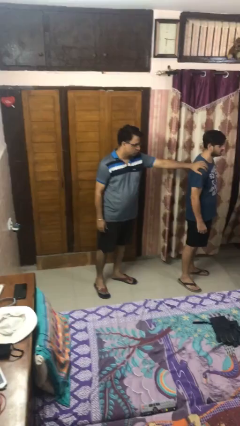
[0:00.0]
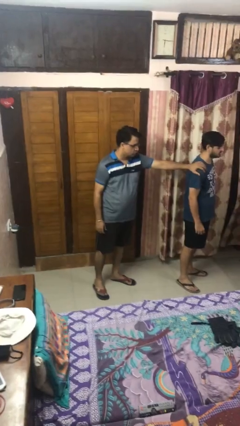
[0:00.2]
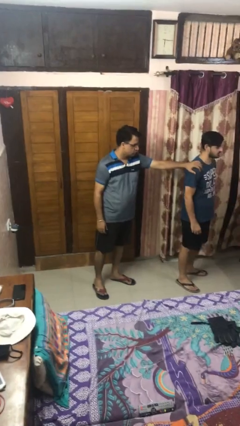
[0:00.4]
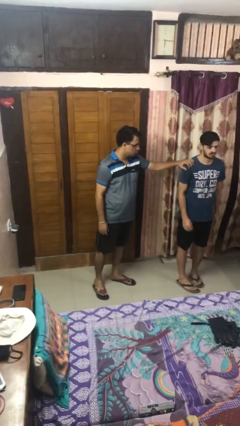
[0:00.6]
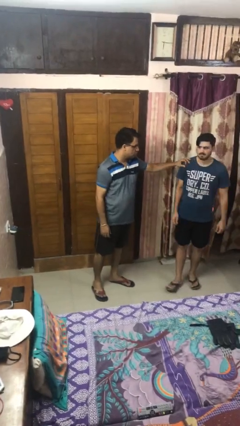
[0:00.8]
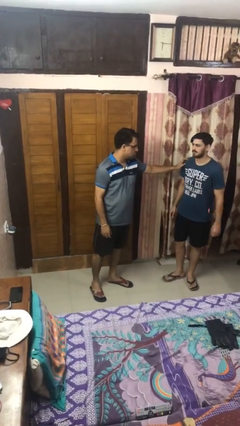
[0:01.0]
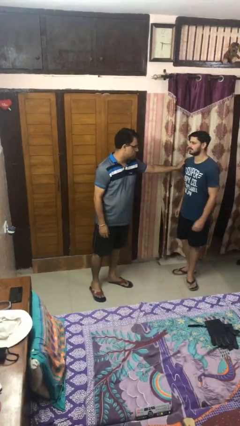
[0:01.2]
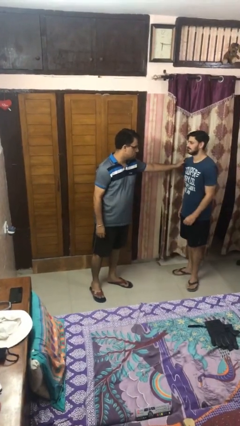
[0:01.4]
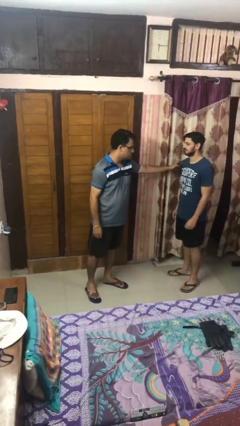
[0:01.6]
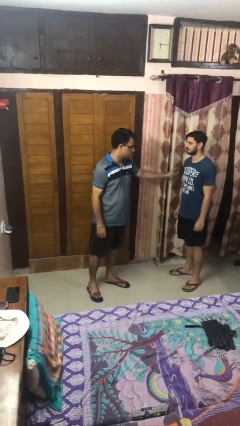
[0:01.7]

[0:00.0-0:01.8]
person spins person around

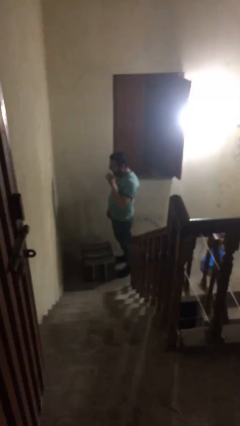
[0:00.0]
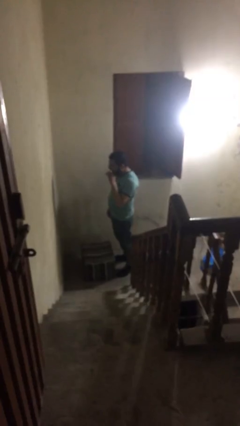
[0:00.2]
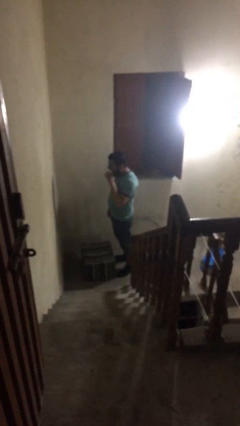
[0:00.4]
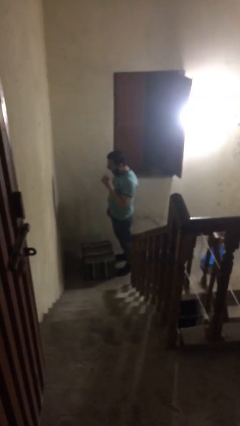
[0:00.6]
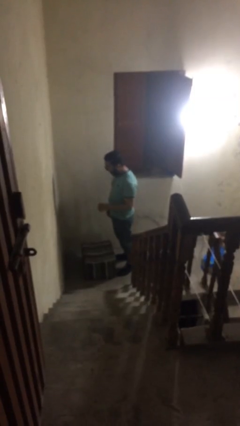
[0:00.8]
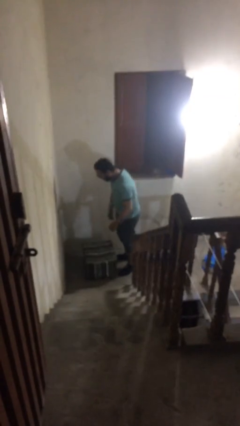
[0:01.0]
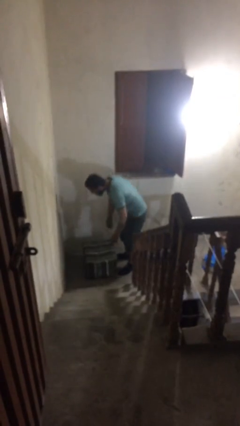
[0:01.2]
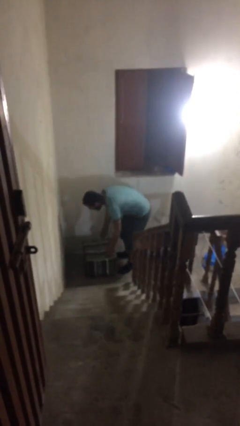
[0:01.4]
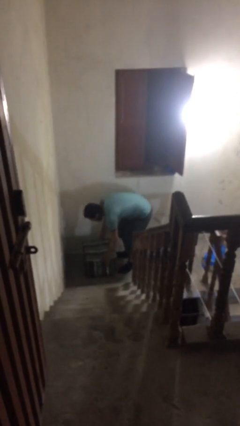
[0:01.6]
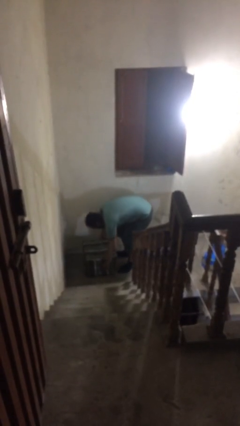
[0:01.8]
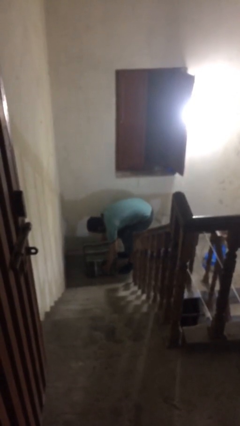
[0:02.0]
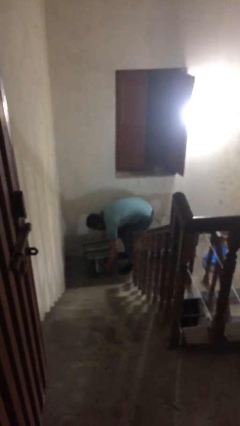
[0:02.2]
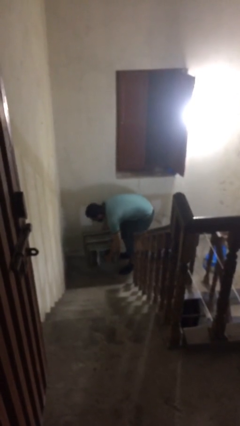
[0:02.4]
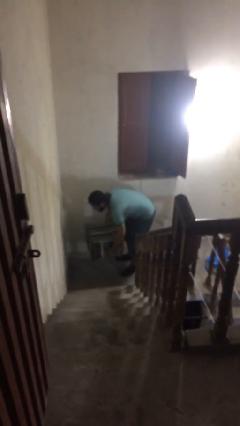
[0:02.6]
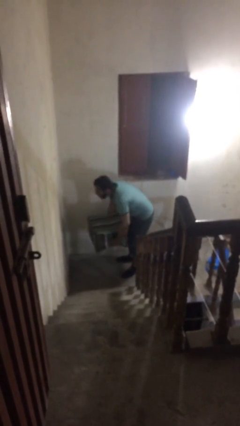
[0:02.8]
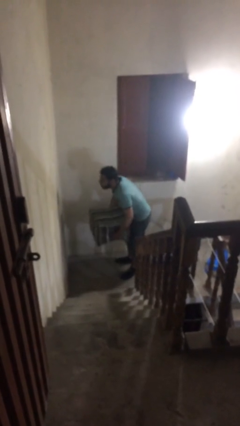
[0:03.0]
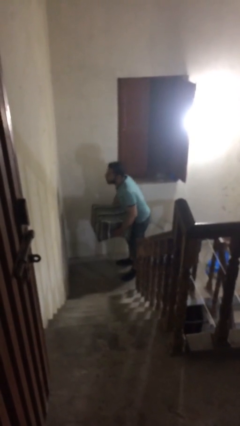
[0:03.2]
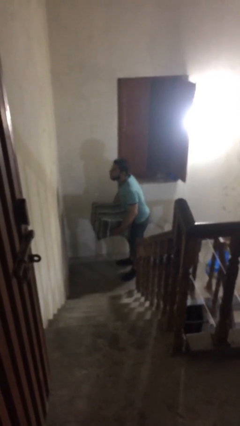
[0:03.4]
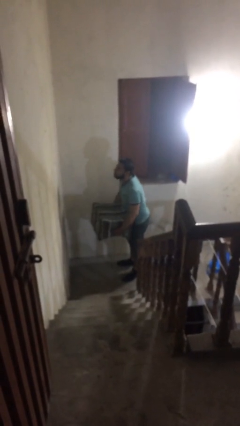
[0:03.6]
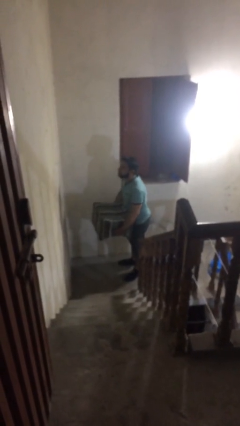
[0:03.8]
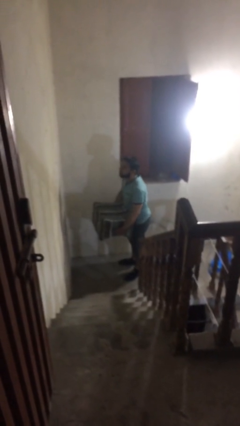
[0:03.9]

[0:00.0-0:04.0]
person picks up object from floor

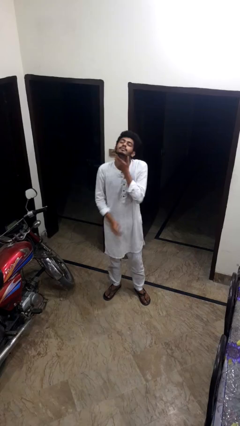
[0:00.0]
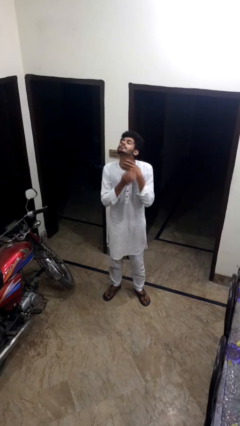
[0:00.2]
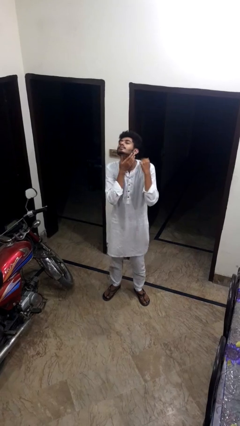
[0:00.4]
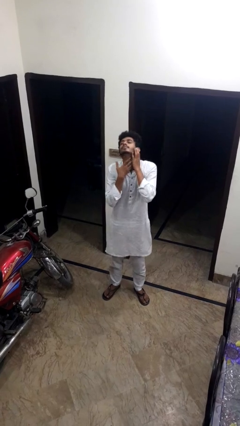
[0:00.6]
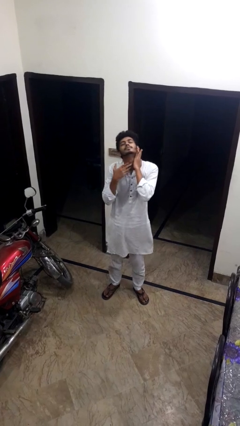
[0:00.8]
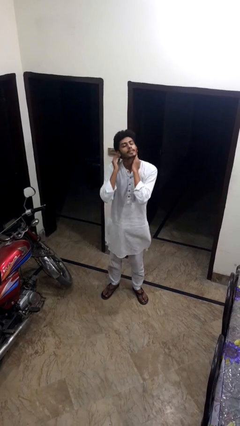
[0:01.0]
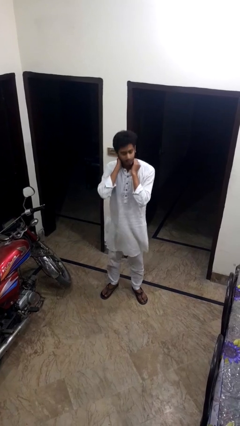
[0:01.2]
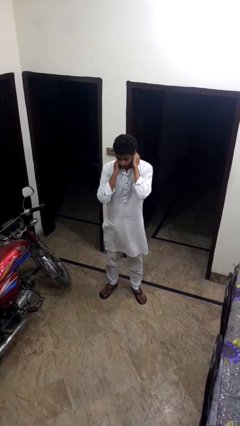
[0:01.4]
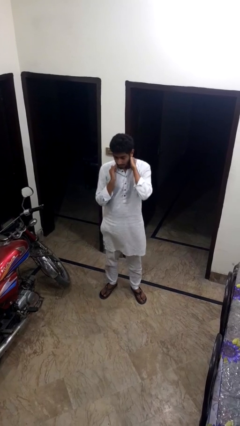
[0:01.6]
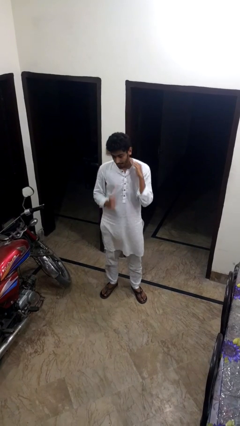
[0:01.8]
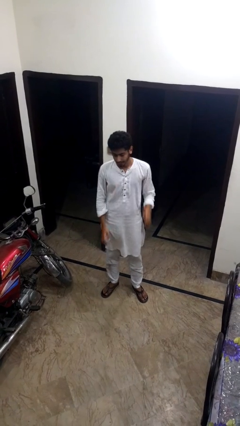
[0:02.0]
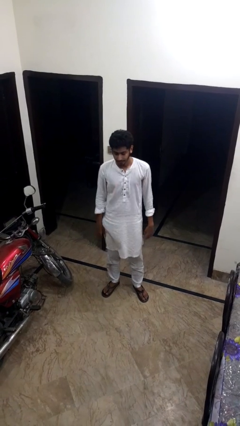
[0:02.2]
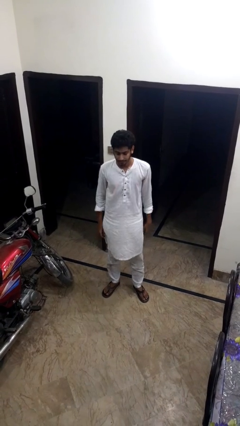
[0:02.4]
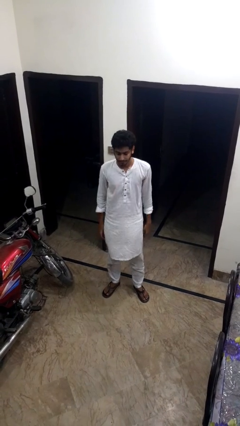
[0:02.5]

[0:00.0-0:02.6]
person rubs neck

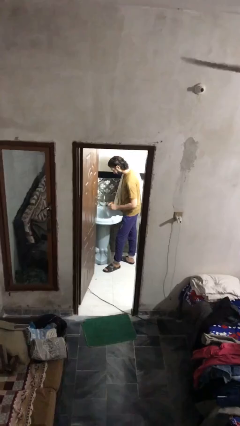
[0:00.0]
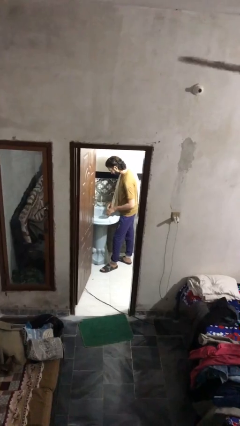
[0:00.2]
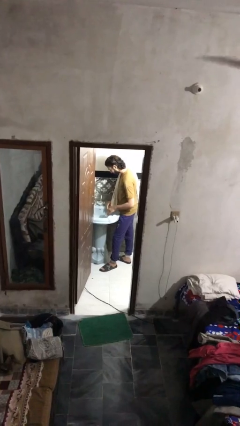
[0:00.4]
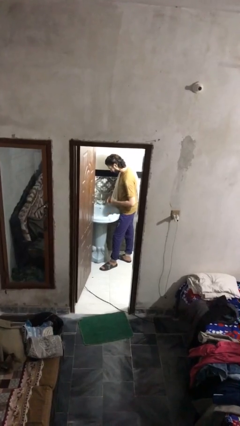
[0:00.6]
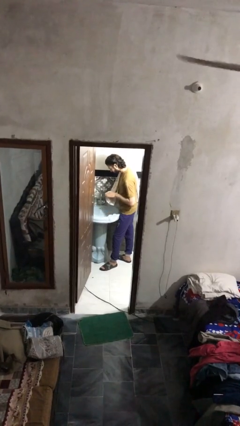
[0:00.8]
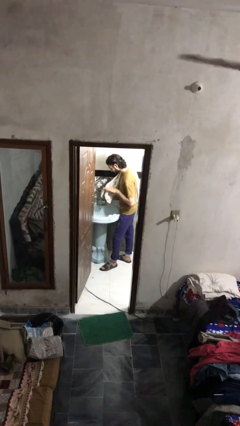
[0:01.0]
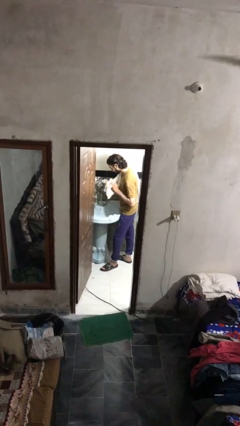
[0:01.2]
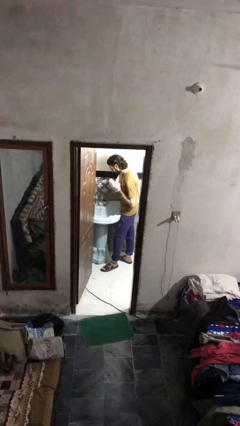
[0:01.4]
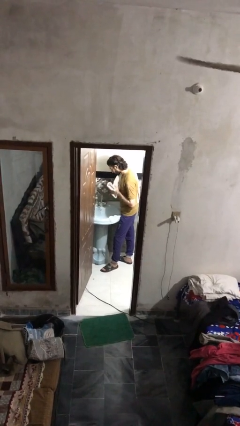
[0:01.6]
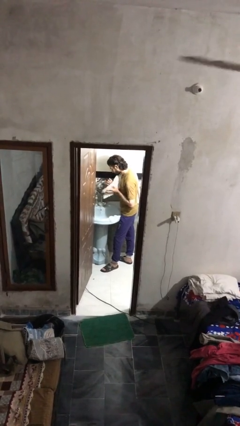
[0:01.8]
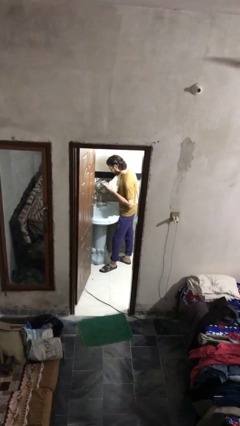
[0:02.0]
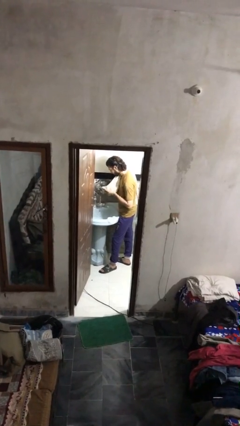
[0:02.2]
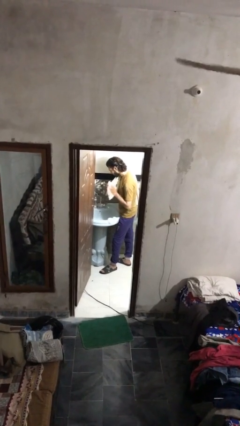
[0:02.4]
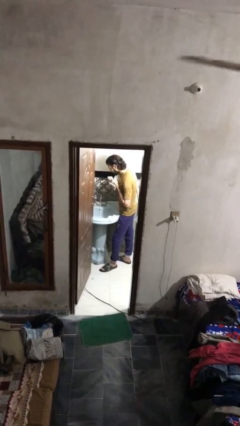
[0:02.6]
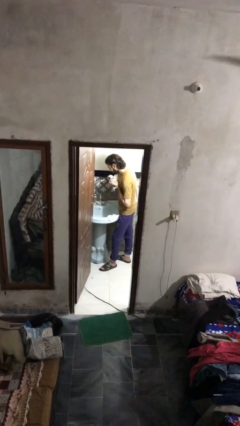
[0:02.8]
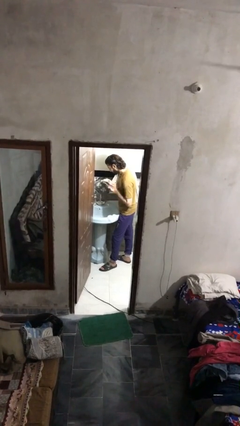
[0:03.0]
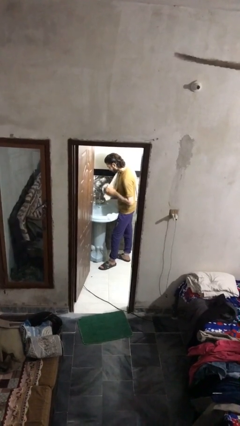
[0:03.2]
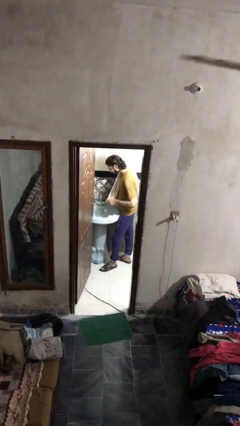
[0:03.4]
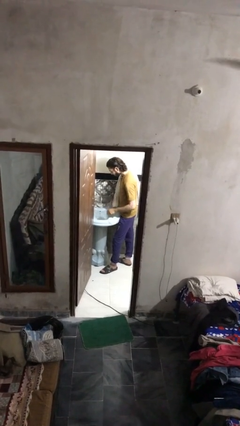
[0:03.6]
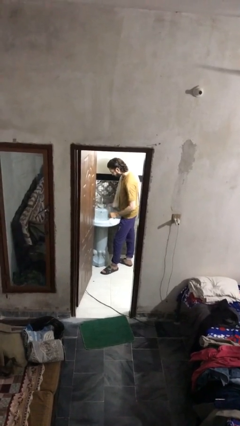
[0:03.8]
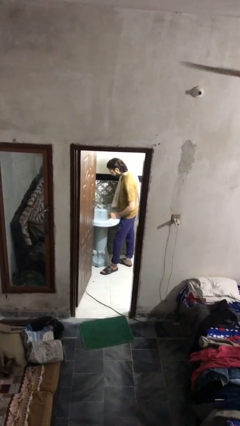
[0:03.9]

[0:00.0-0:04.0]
person dries hands with towel

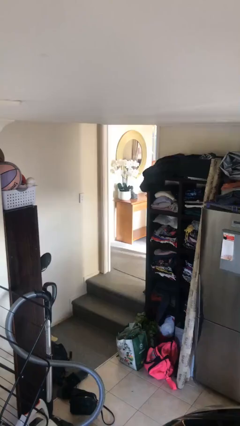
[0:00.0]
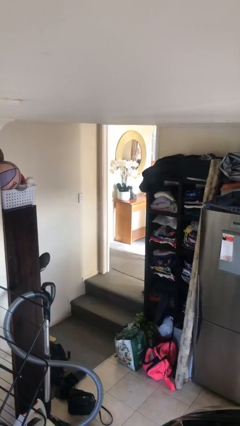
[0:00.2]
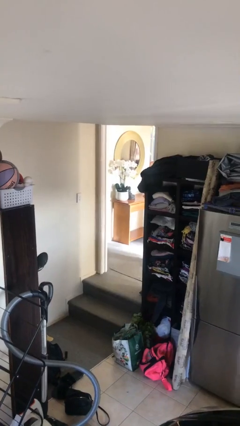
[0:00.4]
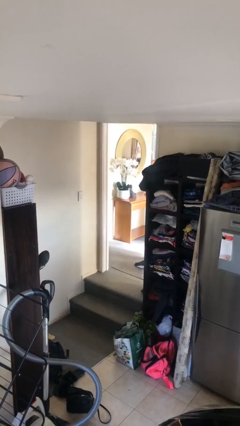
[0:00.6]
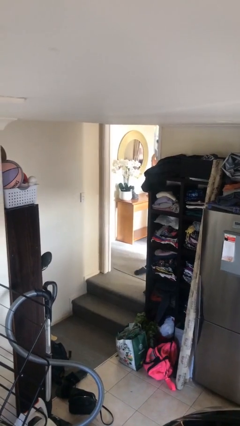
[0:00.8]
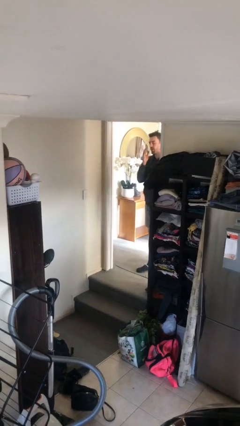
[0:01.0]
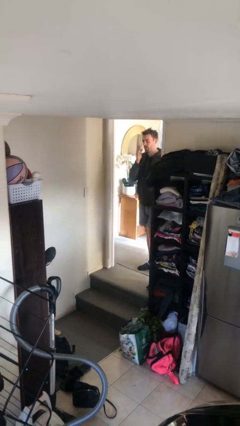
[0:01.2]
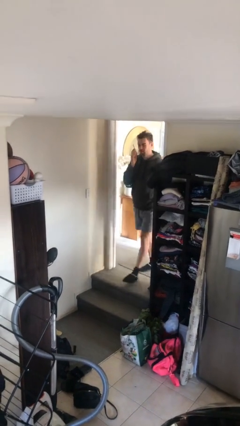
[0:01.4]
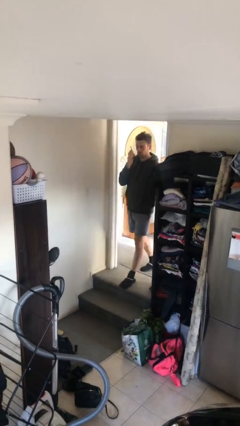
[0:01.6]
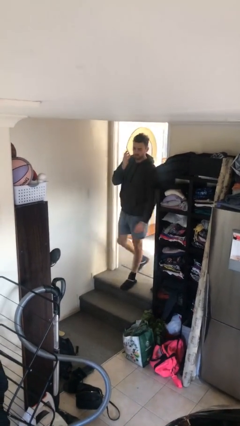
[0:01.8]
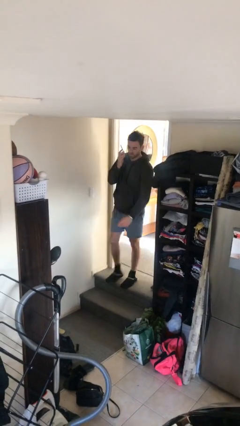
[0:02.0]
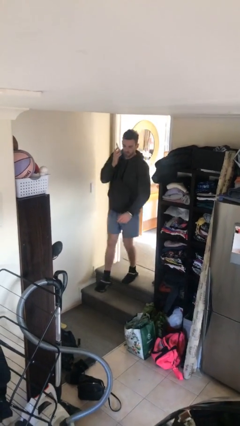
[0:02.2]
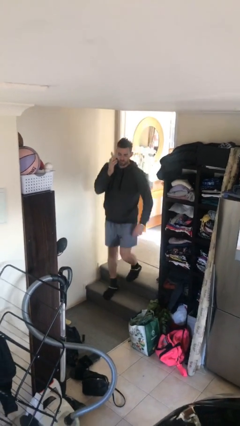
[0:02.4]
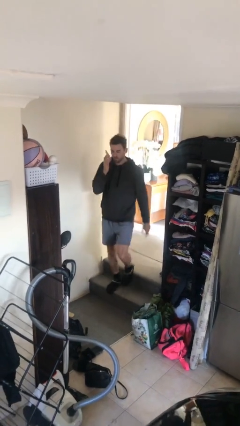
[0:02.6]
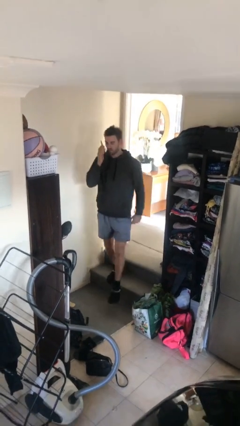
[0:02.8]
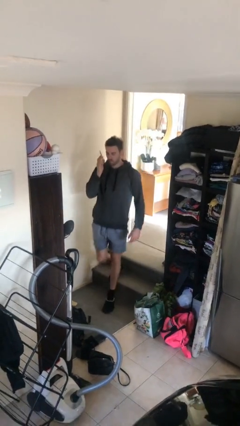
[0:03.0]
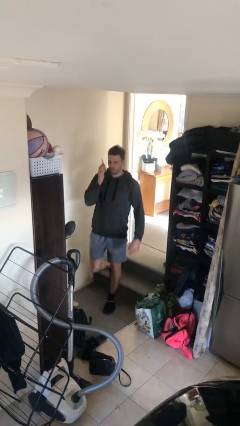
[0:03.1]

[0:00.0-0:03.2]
person enters scene through structure

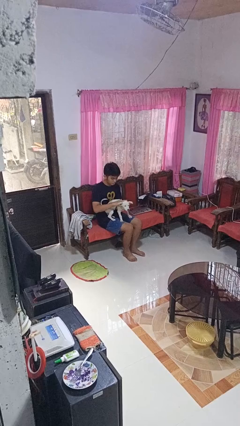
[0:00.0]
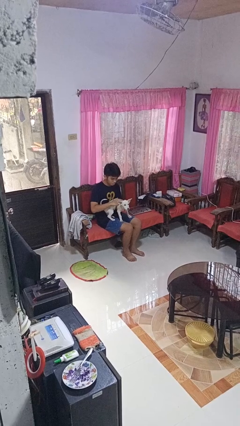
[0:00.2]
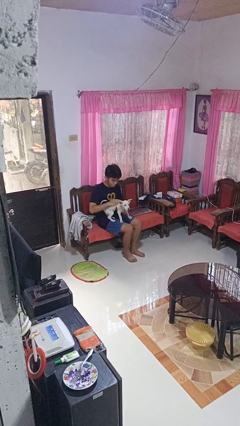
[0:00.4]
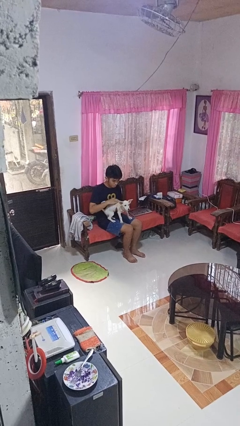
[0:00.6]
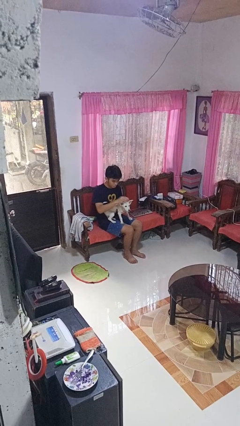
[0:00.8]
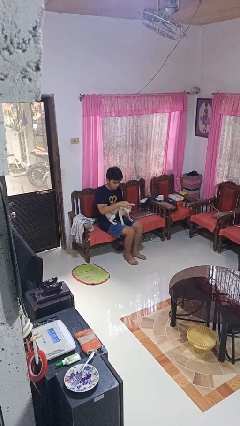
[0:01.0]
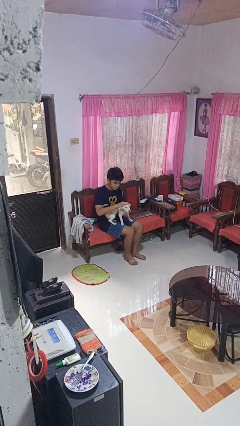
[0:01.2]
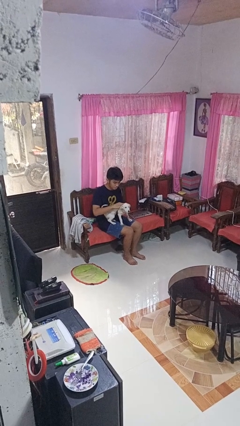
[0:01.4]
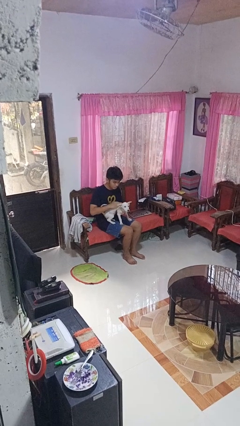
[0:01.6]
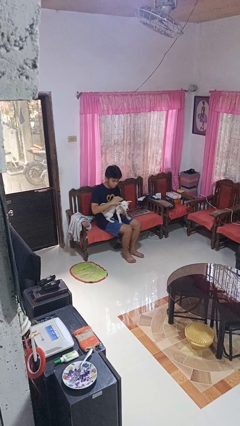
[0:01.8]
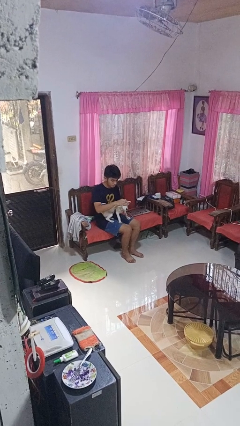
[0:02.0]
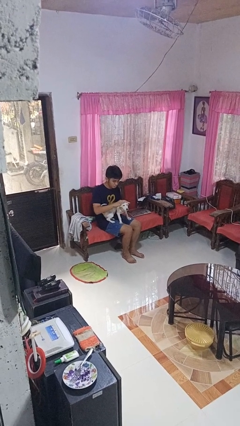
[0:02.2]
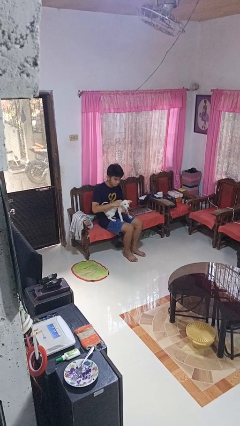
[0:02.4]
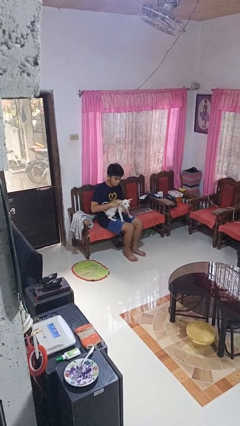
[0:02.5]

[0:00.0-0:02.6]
person pets dog
